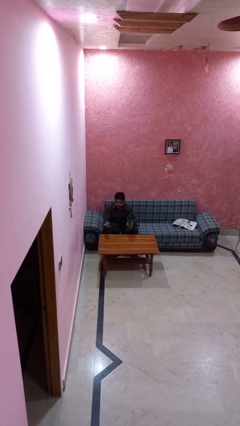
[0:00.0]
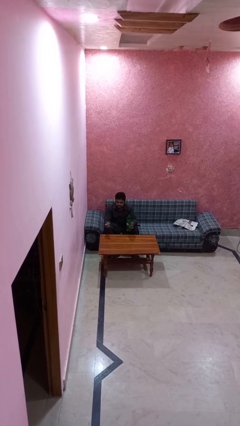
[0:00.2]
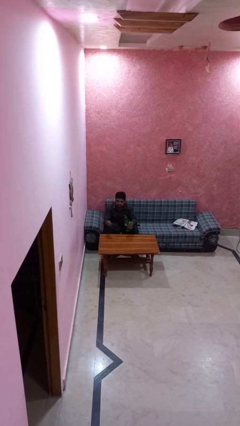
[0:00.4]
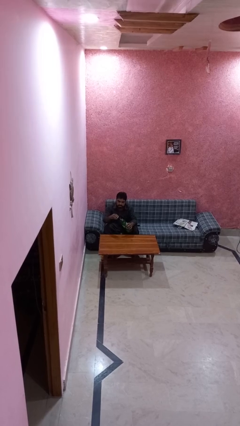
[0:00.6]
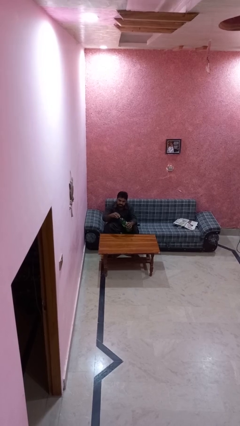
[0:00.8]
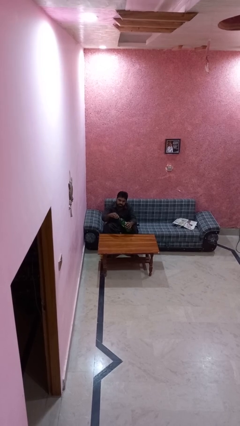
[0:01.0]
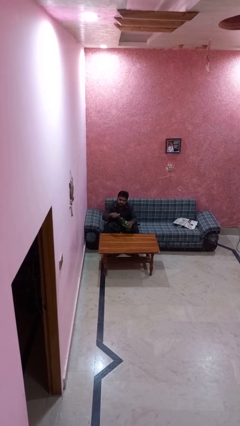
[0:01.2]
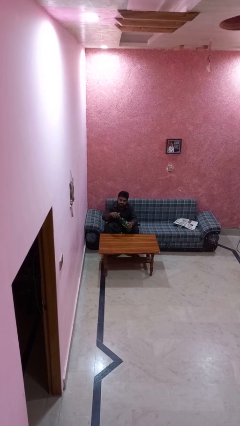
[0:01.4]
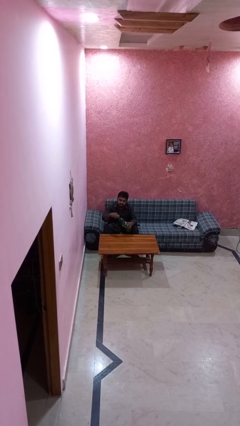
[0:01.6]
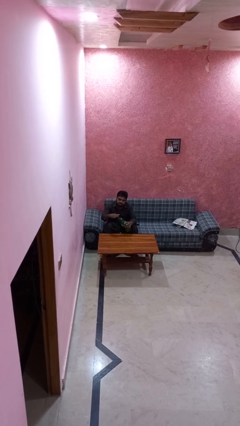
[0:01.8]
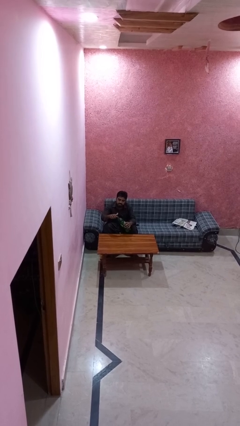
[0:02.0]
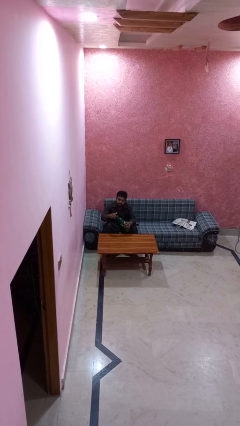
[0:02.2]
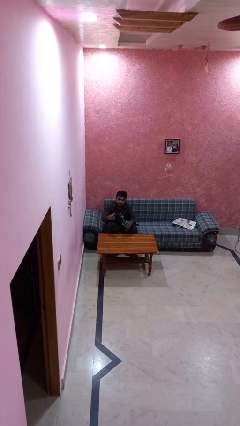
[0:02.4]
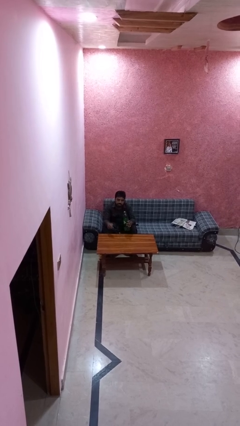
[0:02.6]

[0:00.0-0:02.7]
person screws lid to bottle

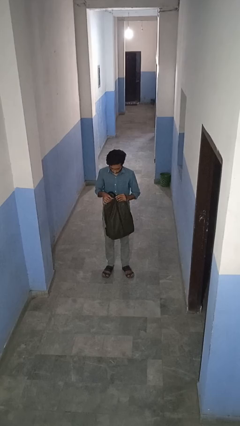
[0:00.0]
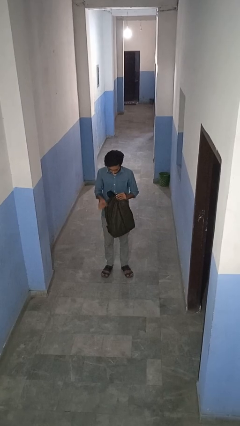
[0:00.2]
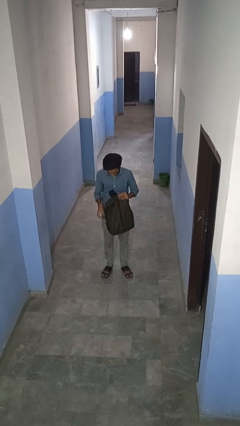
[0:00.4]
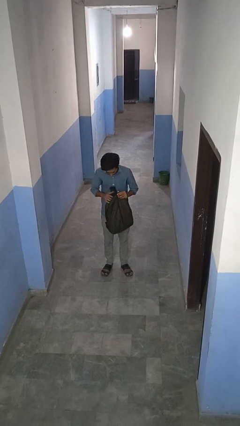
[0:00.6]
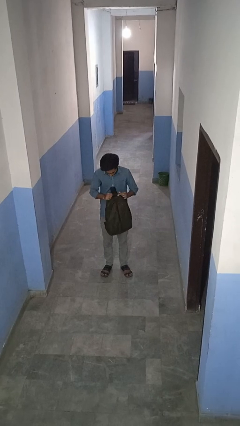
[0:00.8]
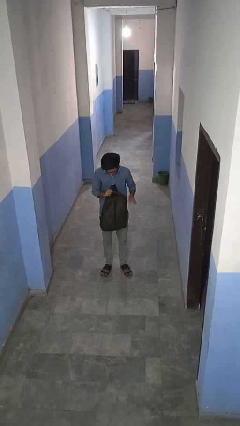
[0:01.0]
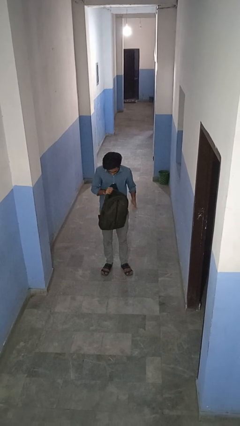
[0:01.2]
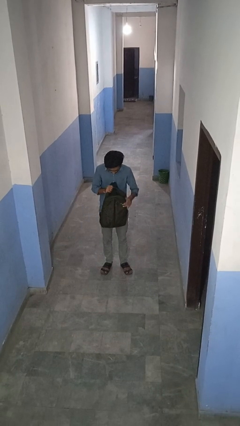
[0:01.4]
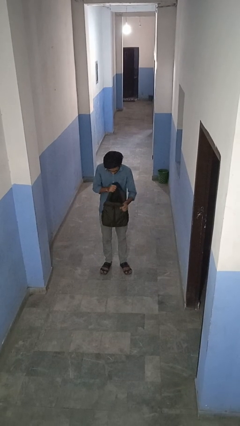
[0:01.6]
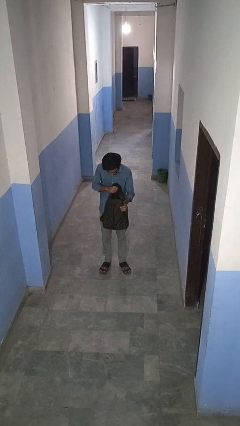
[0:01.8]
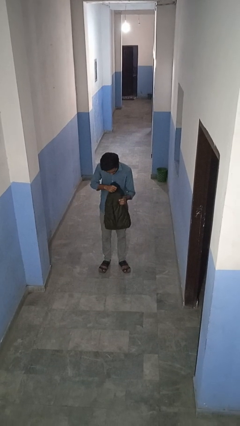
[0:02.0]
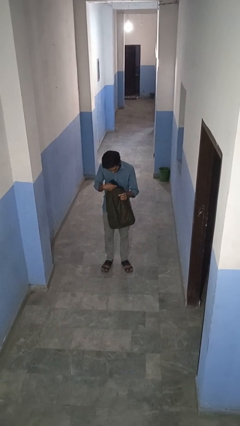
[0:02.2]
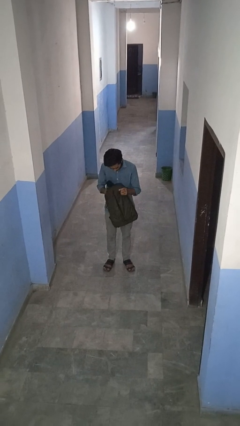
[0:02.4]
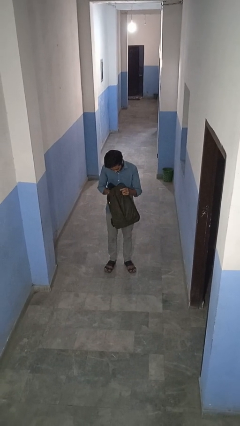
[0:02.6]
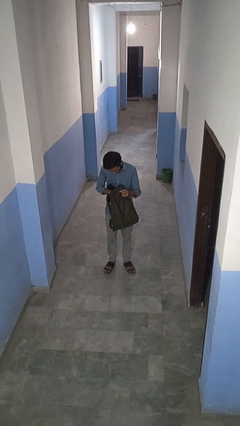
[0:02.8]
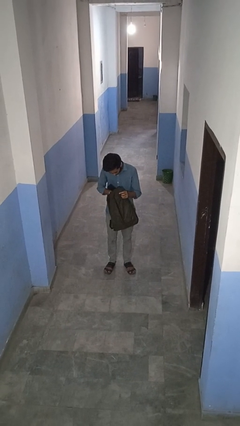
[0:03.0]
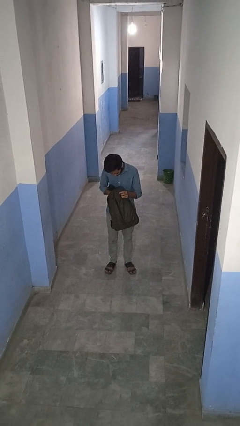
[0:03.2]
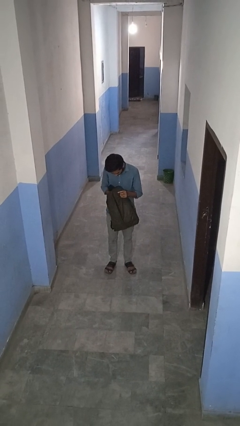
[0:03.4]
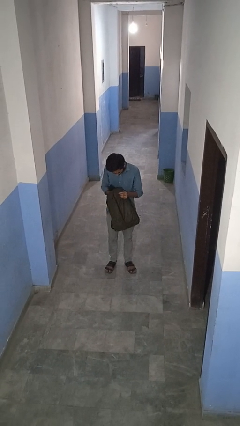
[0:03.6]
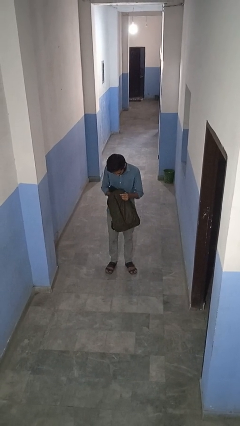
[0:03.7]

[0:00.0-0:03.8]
person searches in backpack

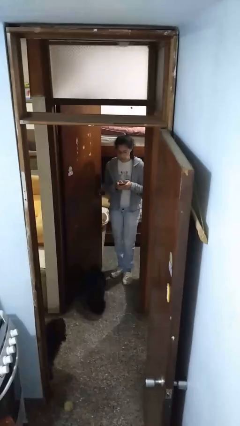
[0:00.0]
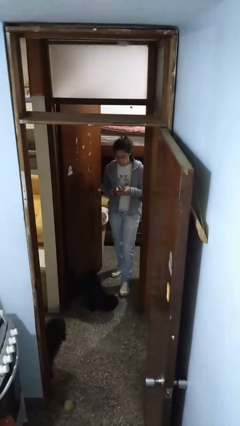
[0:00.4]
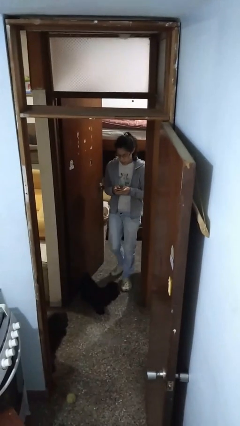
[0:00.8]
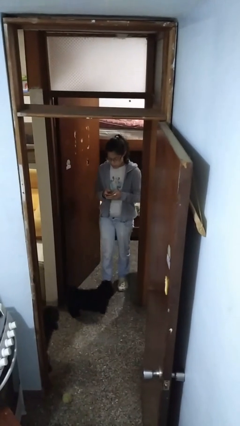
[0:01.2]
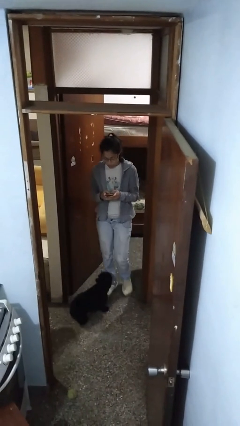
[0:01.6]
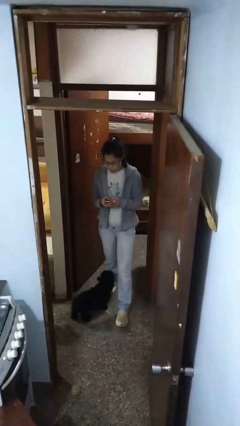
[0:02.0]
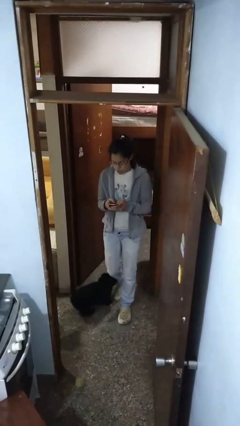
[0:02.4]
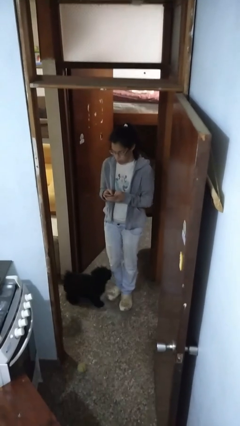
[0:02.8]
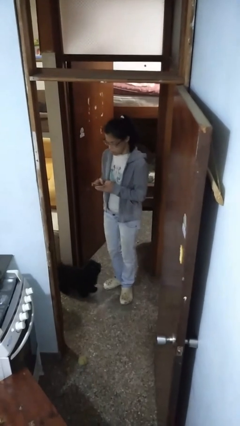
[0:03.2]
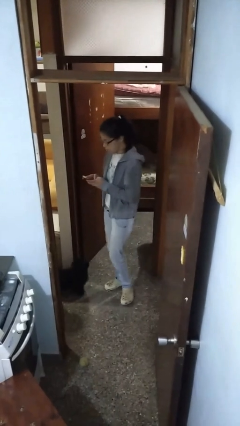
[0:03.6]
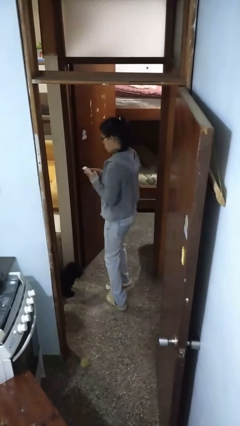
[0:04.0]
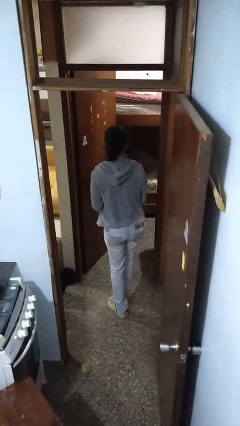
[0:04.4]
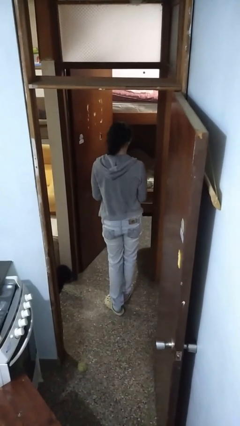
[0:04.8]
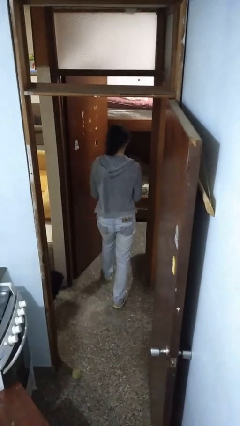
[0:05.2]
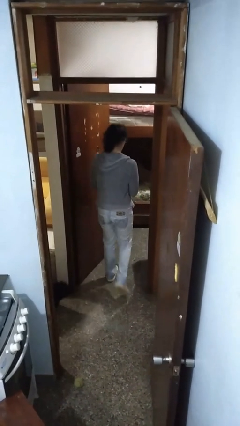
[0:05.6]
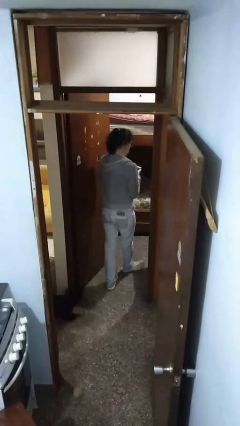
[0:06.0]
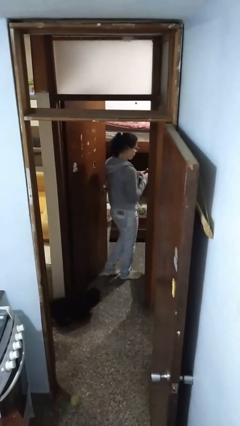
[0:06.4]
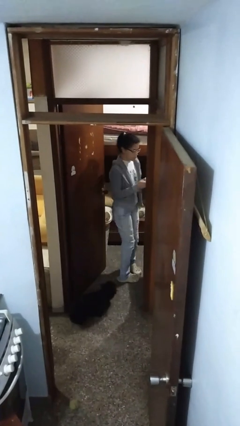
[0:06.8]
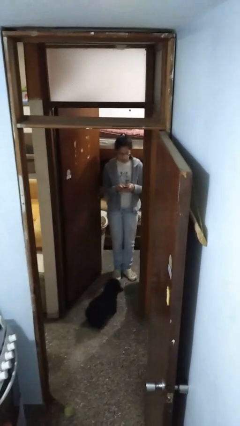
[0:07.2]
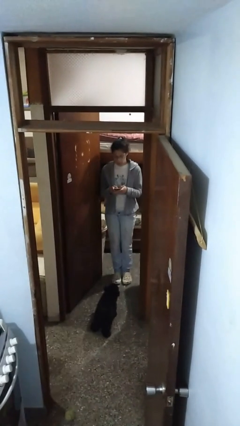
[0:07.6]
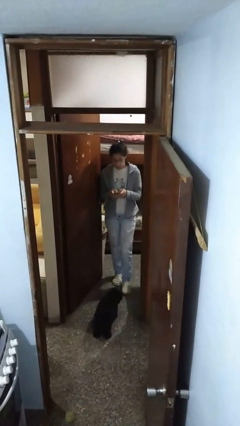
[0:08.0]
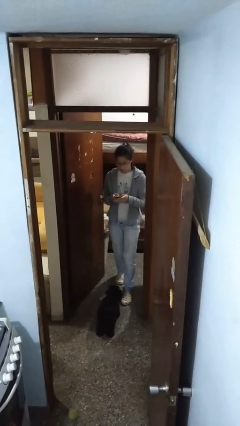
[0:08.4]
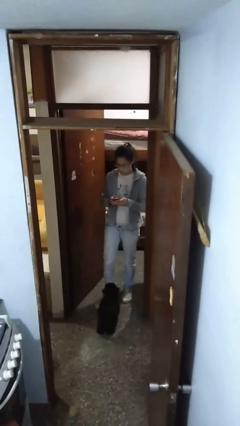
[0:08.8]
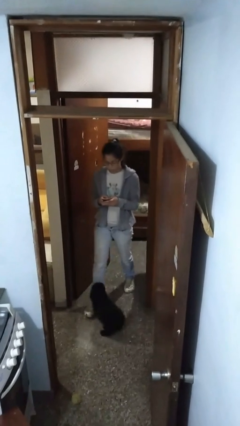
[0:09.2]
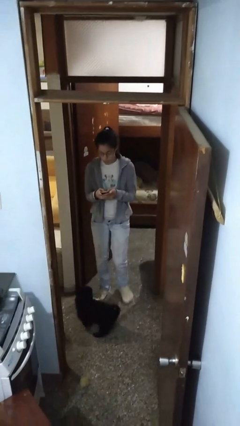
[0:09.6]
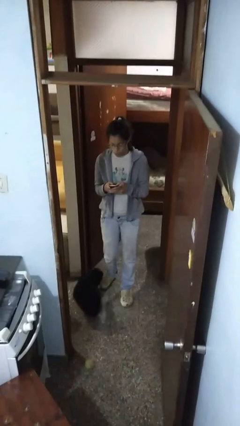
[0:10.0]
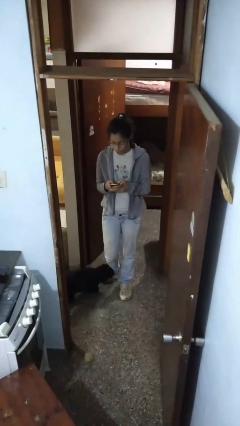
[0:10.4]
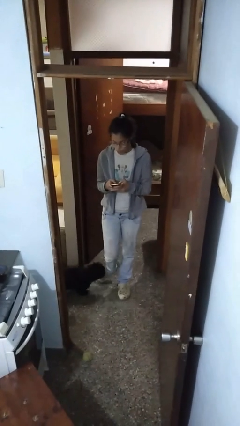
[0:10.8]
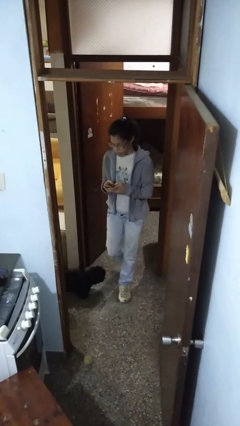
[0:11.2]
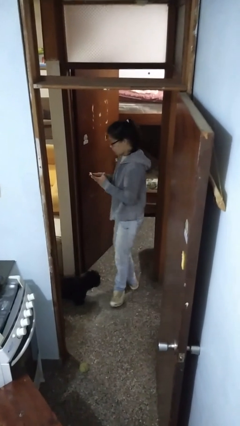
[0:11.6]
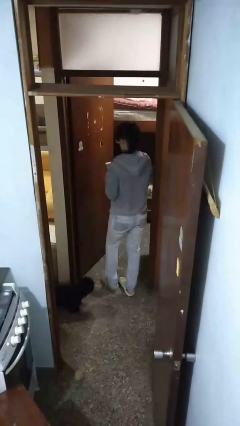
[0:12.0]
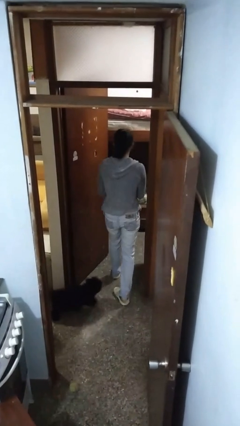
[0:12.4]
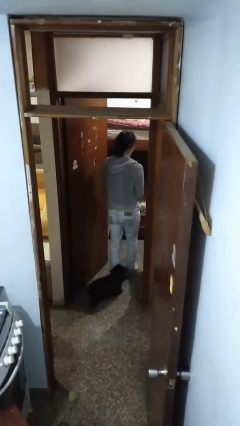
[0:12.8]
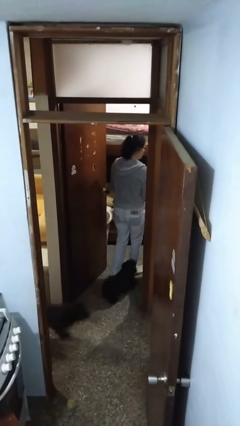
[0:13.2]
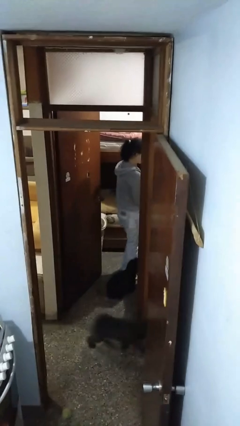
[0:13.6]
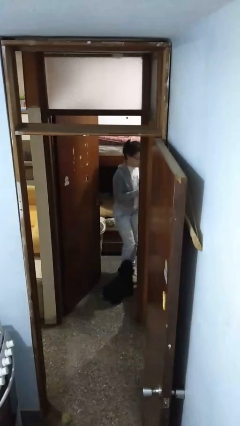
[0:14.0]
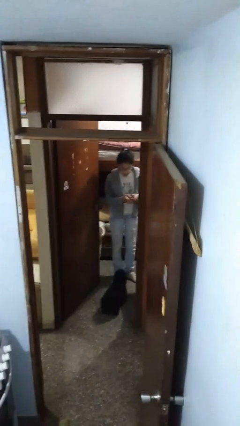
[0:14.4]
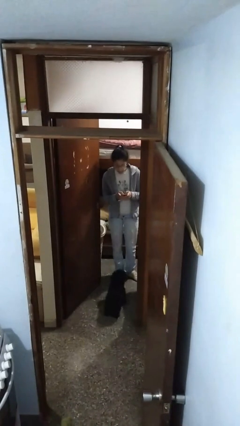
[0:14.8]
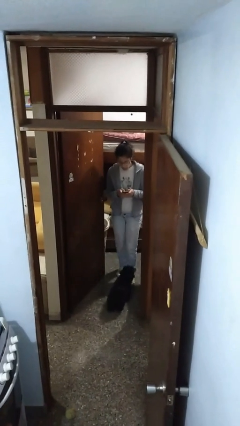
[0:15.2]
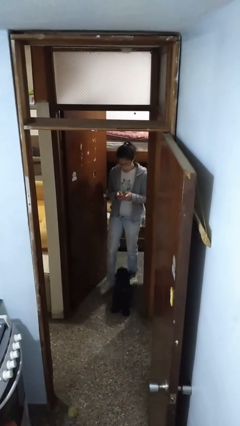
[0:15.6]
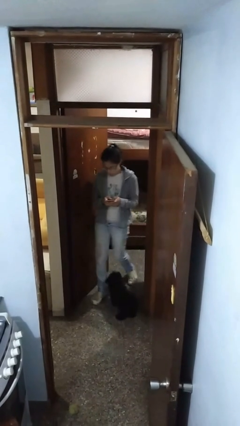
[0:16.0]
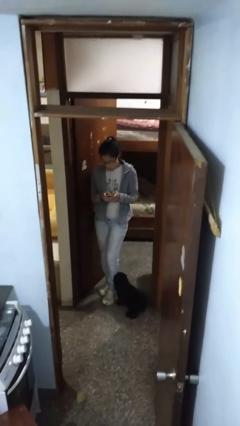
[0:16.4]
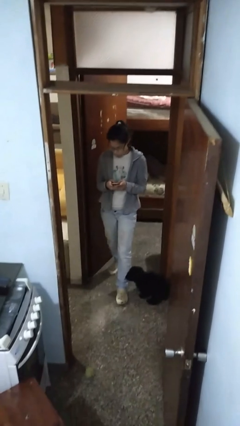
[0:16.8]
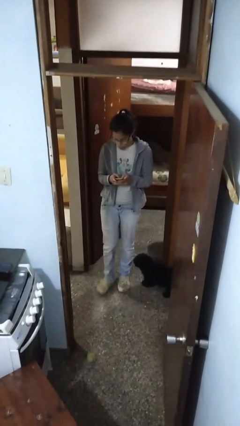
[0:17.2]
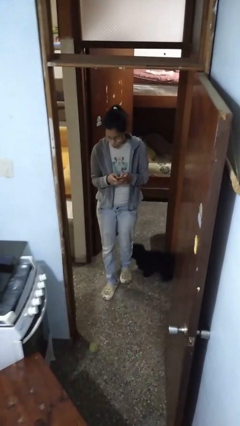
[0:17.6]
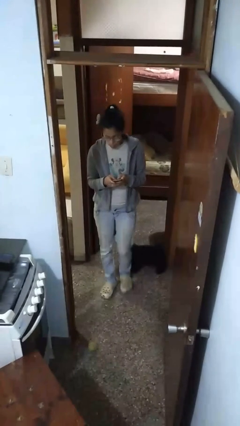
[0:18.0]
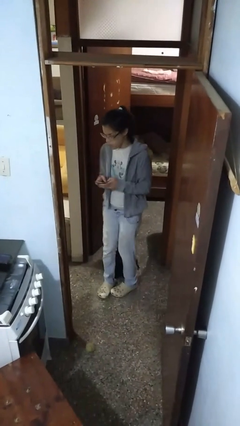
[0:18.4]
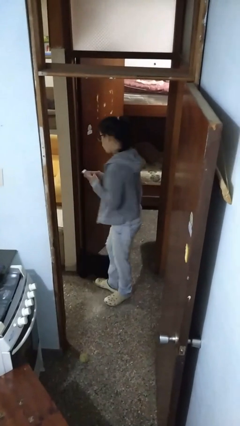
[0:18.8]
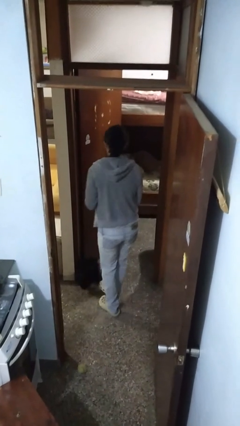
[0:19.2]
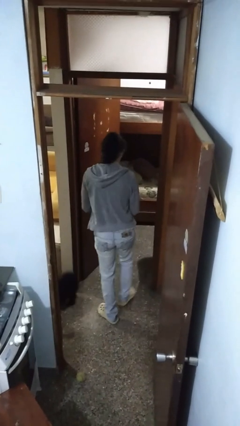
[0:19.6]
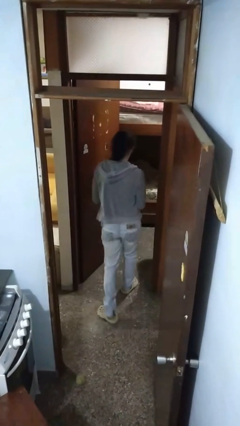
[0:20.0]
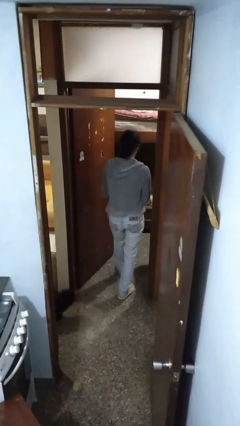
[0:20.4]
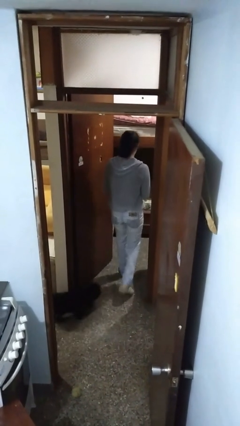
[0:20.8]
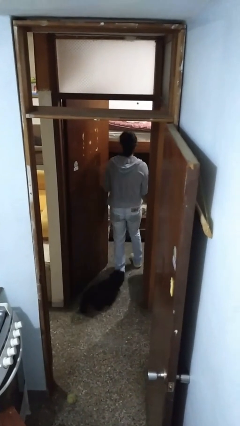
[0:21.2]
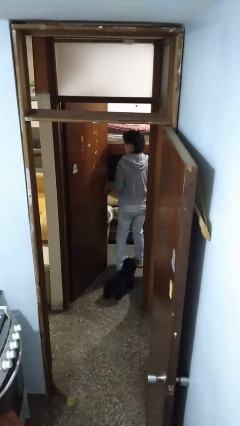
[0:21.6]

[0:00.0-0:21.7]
person texts on phone
